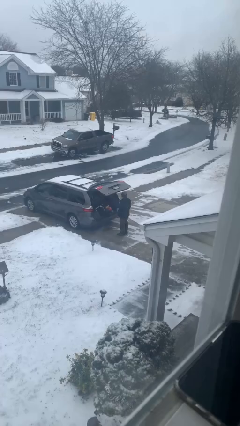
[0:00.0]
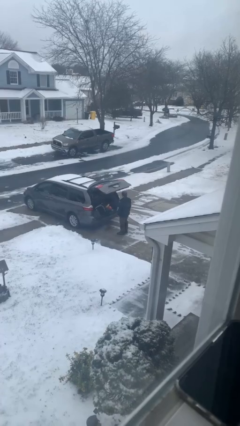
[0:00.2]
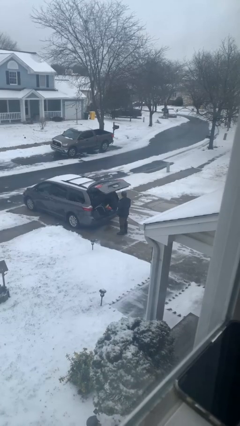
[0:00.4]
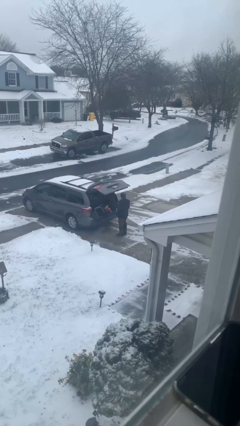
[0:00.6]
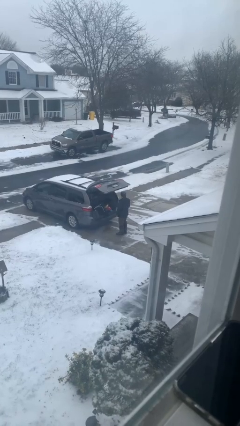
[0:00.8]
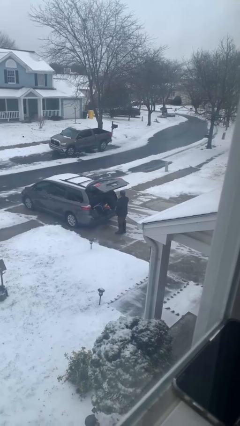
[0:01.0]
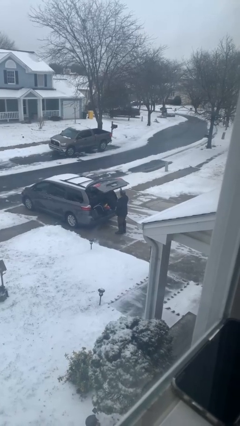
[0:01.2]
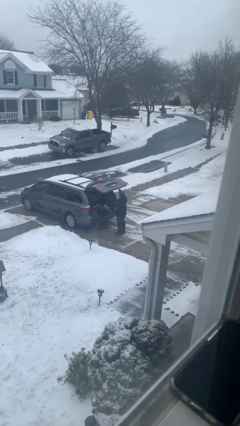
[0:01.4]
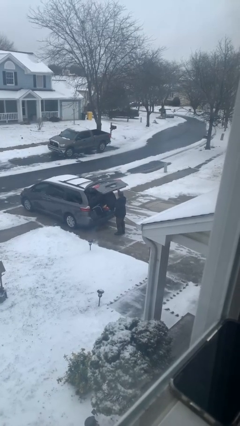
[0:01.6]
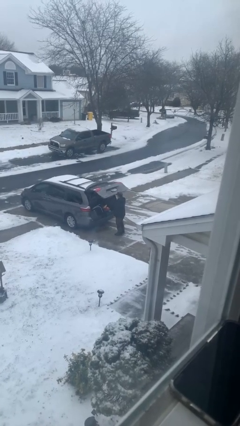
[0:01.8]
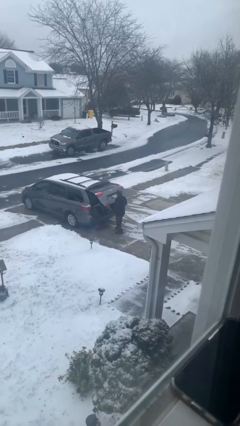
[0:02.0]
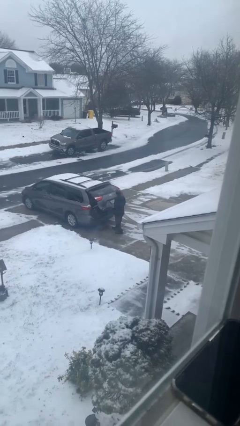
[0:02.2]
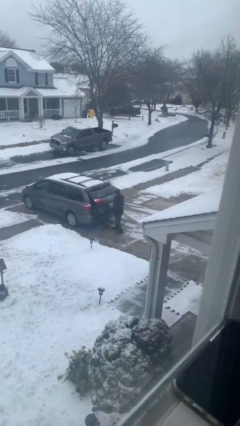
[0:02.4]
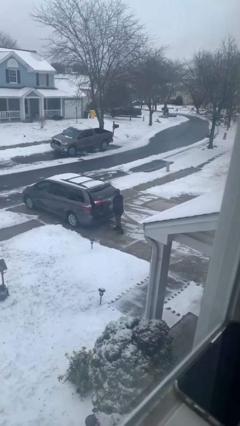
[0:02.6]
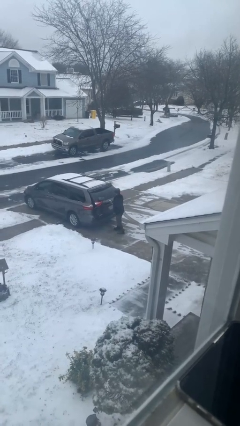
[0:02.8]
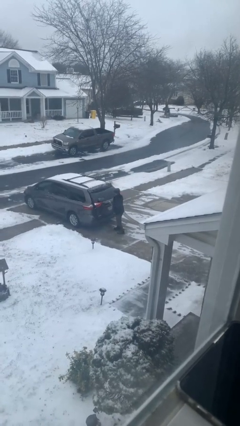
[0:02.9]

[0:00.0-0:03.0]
person closes car trunk

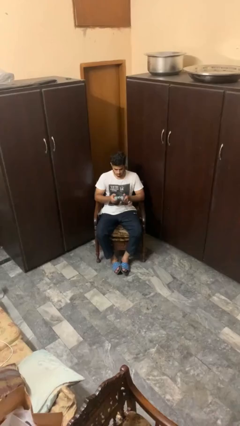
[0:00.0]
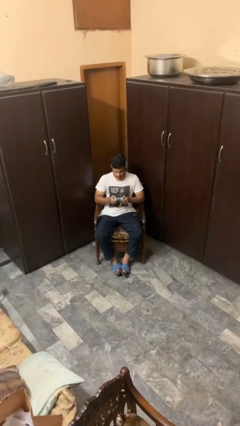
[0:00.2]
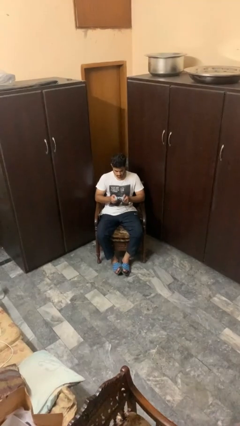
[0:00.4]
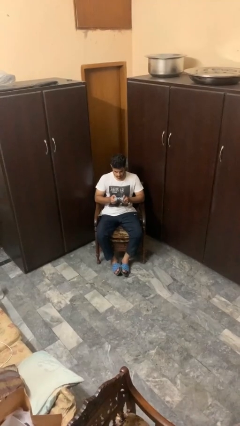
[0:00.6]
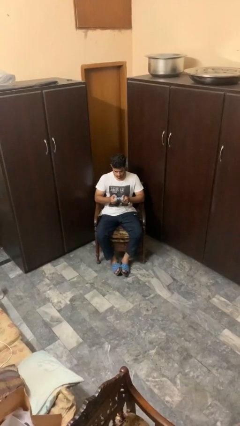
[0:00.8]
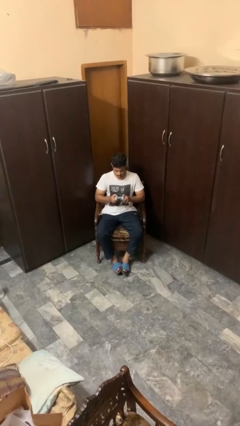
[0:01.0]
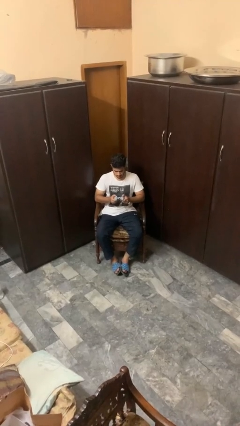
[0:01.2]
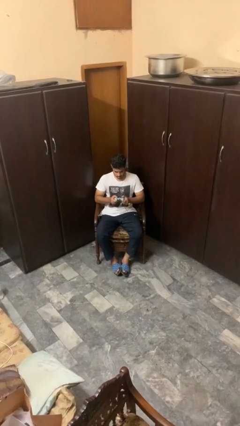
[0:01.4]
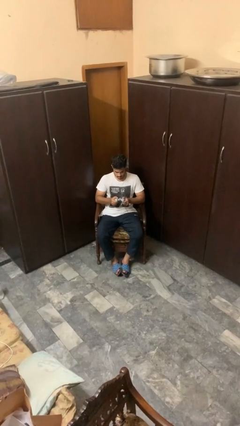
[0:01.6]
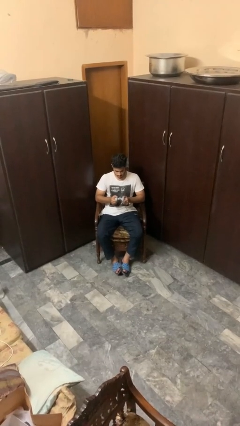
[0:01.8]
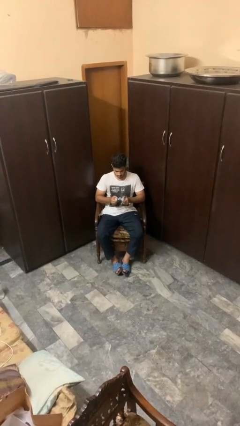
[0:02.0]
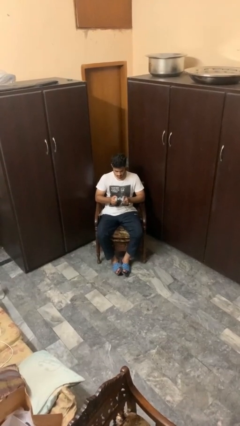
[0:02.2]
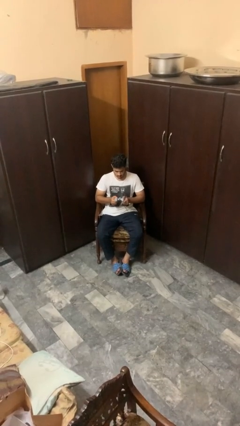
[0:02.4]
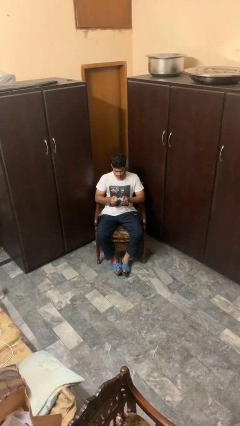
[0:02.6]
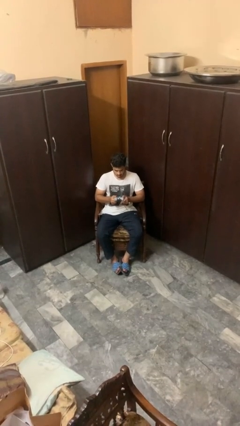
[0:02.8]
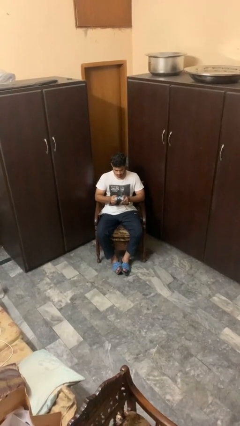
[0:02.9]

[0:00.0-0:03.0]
person interacts with handheld game

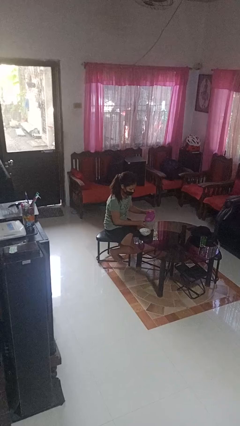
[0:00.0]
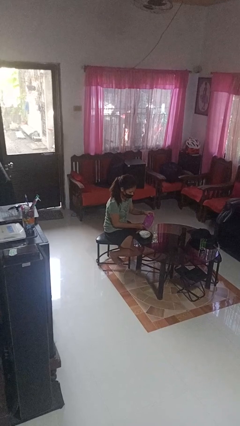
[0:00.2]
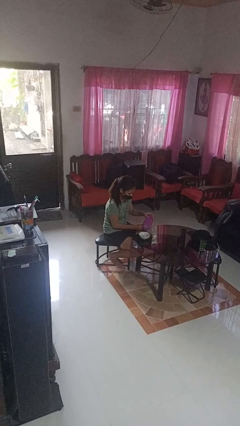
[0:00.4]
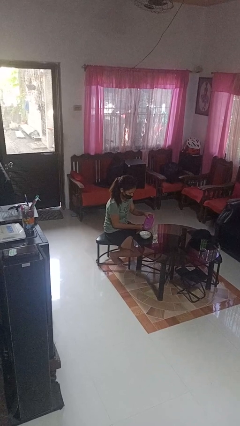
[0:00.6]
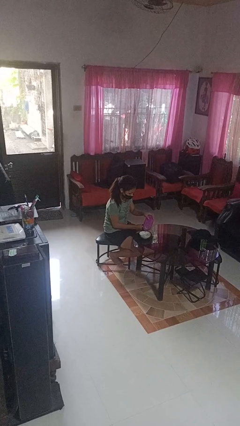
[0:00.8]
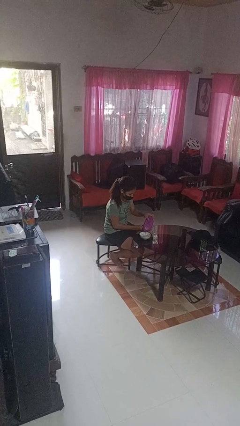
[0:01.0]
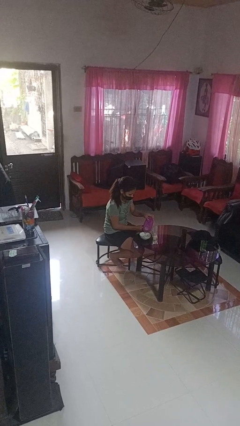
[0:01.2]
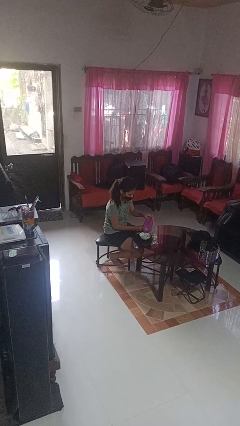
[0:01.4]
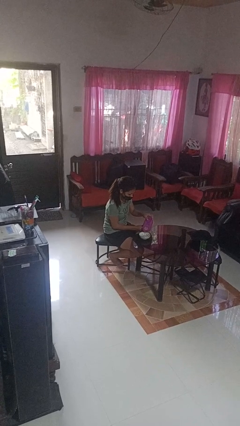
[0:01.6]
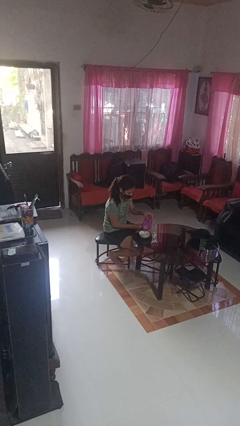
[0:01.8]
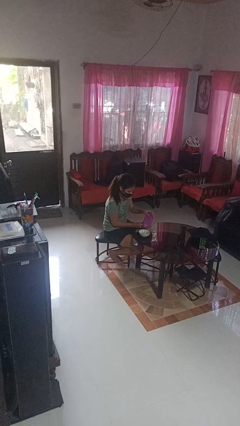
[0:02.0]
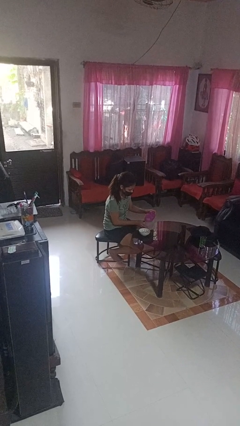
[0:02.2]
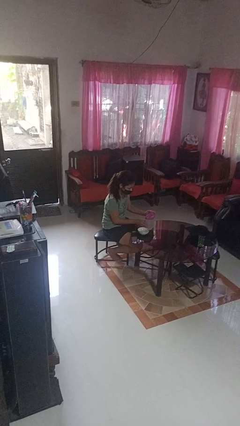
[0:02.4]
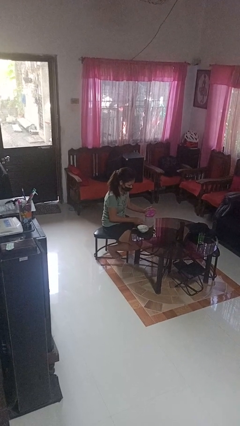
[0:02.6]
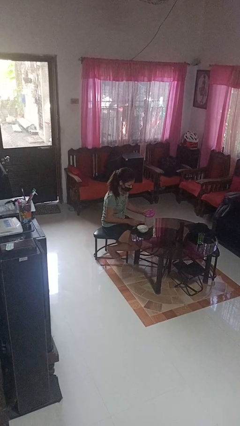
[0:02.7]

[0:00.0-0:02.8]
person pours into bowl

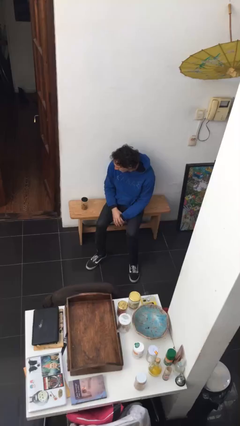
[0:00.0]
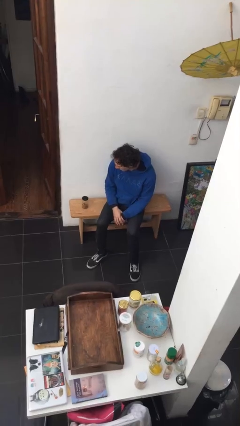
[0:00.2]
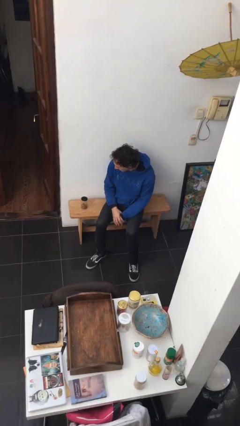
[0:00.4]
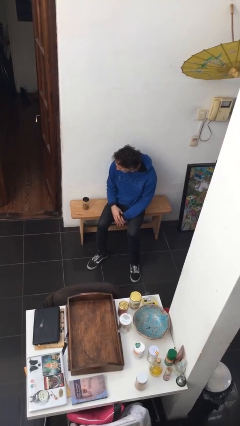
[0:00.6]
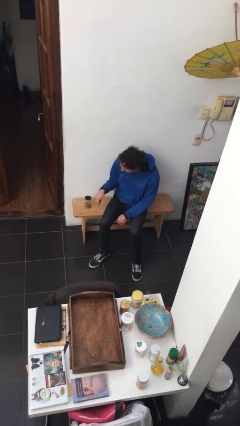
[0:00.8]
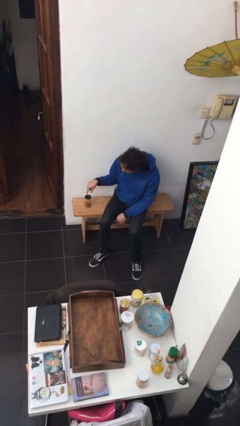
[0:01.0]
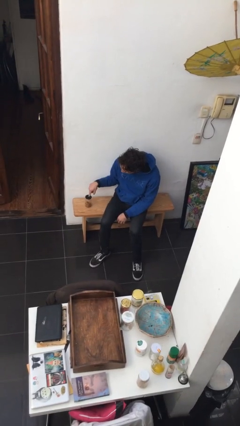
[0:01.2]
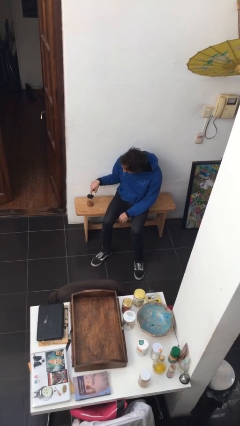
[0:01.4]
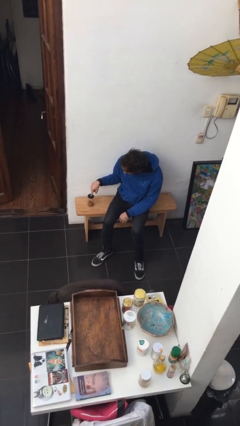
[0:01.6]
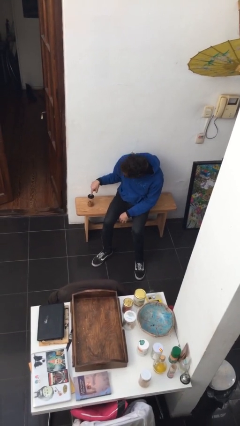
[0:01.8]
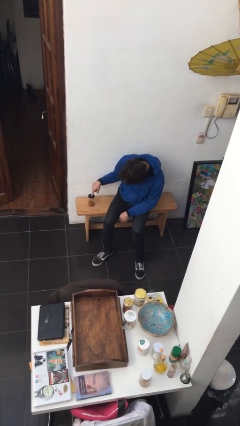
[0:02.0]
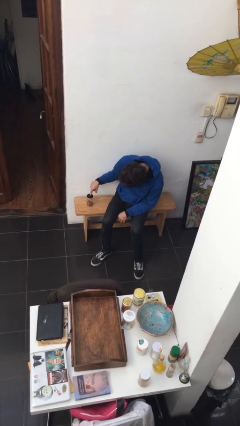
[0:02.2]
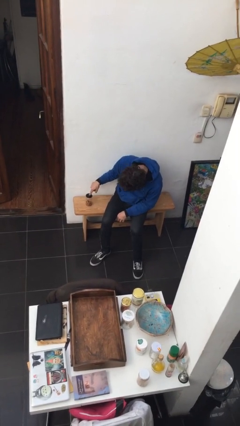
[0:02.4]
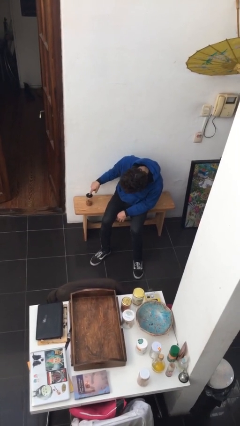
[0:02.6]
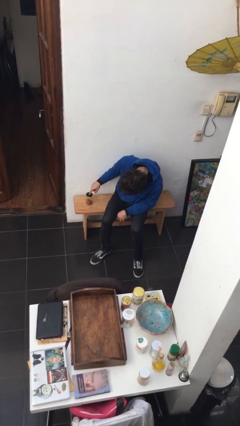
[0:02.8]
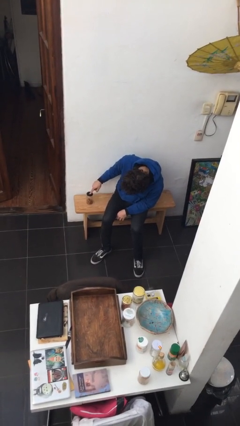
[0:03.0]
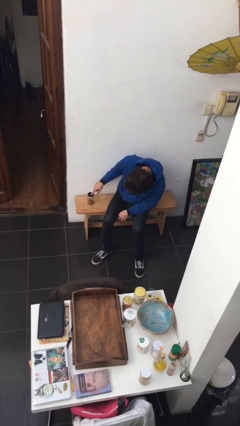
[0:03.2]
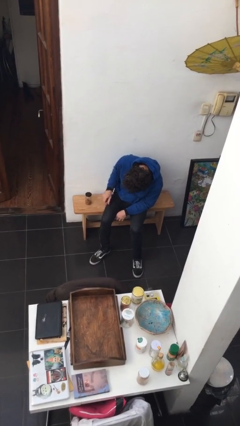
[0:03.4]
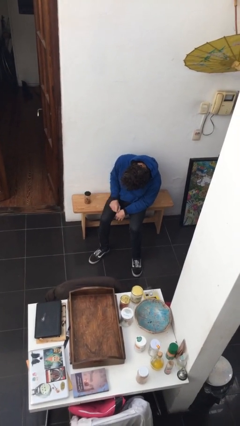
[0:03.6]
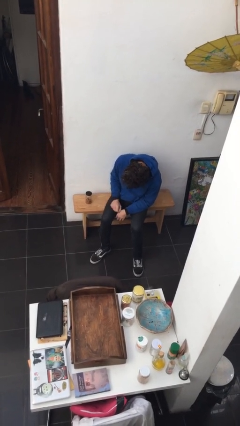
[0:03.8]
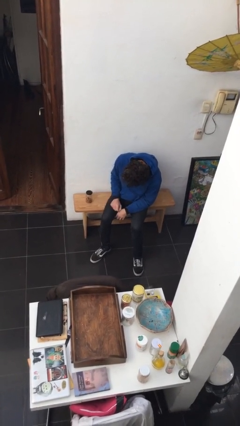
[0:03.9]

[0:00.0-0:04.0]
person taps object with finger

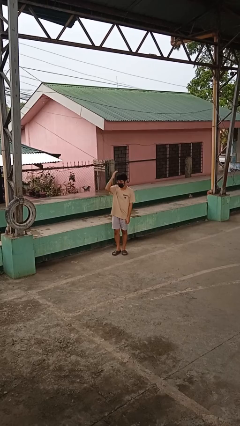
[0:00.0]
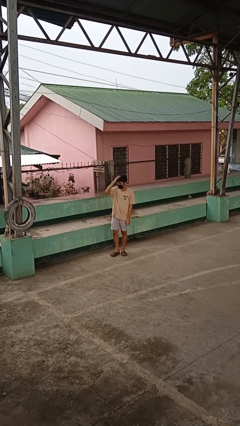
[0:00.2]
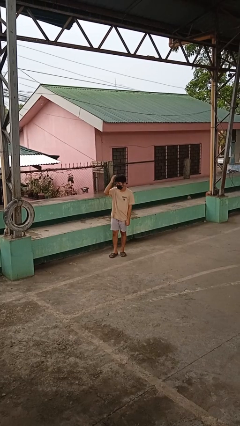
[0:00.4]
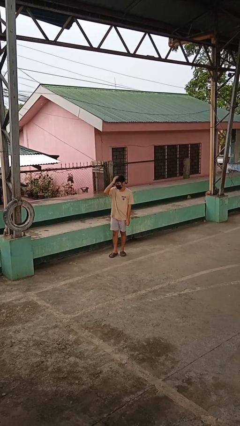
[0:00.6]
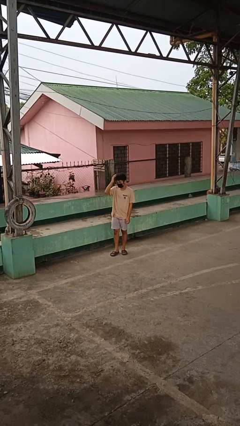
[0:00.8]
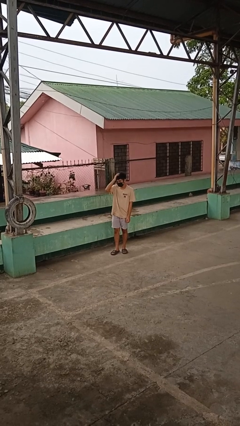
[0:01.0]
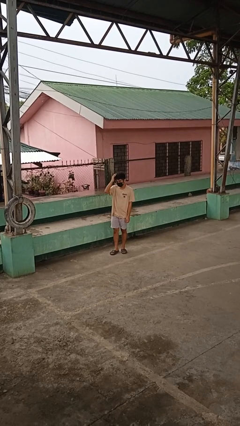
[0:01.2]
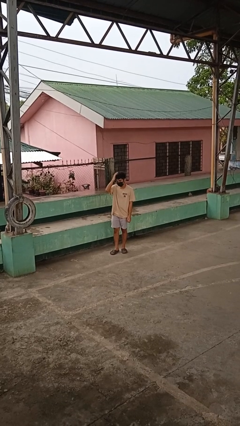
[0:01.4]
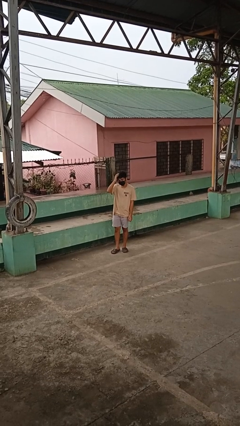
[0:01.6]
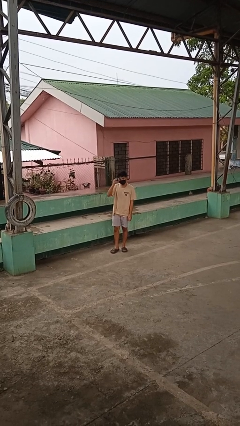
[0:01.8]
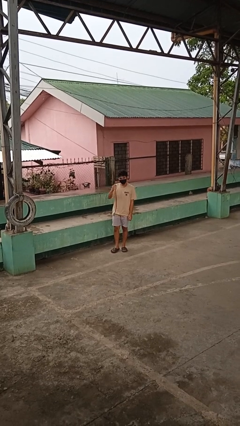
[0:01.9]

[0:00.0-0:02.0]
person pats head

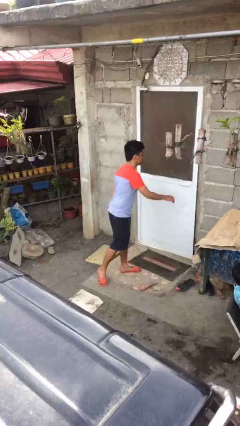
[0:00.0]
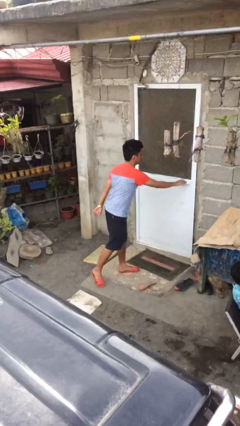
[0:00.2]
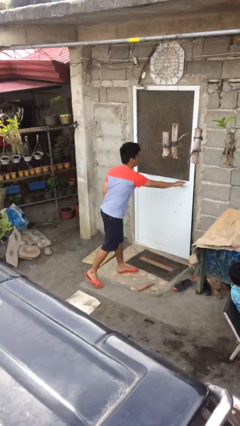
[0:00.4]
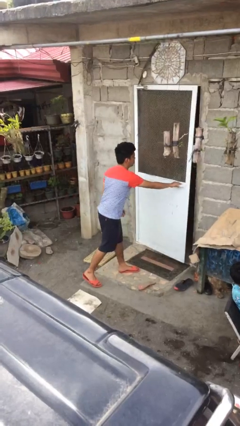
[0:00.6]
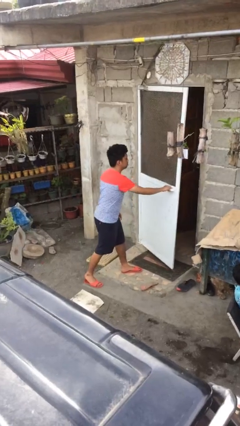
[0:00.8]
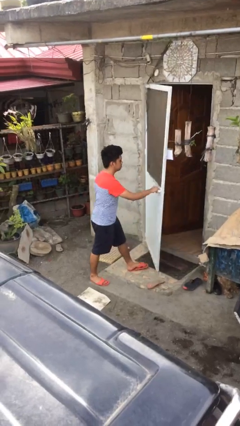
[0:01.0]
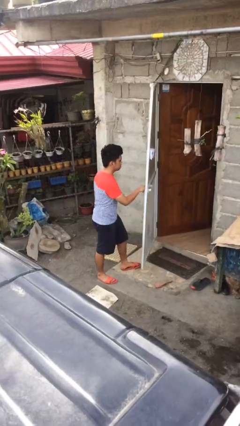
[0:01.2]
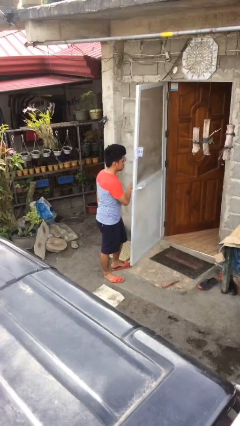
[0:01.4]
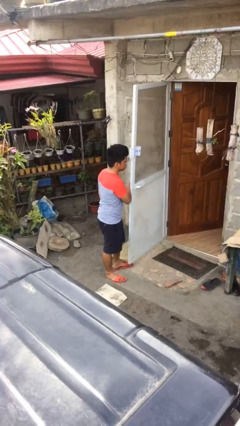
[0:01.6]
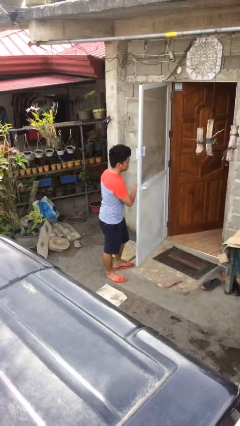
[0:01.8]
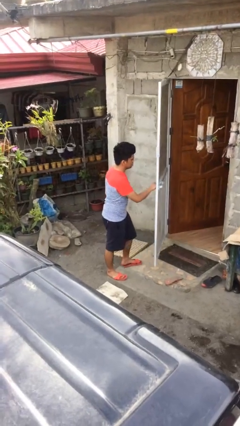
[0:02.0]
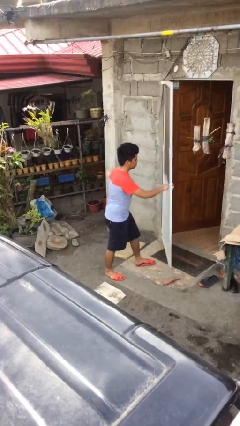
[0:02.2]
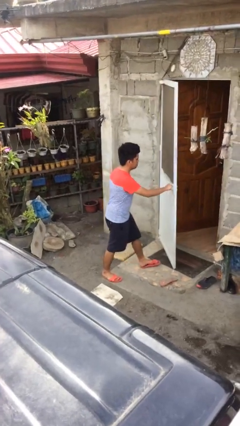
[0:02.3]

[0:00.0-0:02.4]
person opens facility door

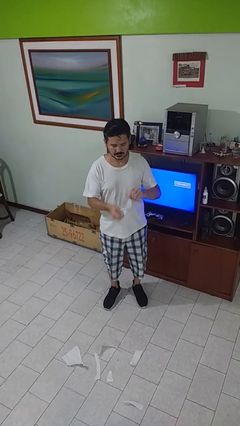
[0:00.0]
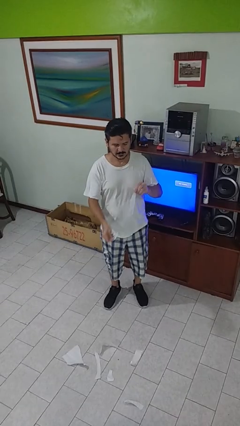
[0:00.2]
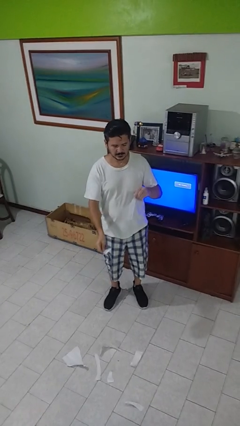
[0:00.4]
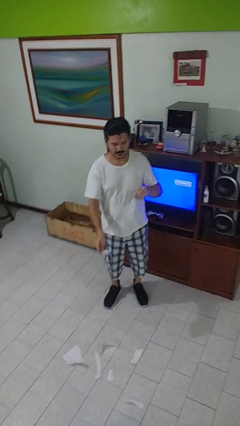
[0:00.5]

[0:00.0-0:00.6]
person tears paper
